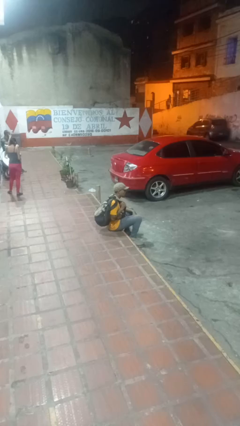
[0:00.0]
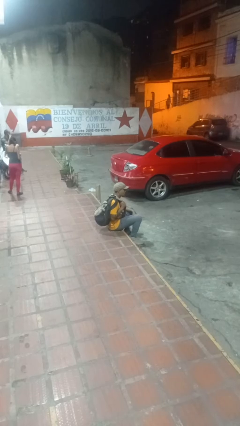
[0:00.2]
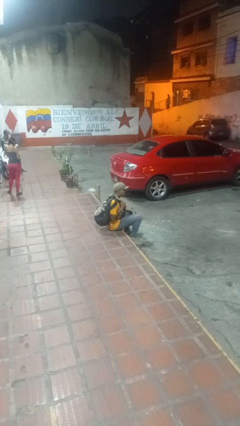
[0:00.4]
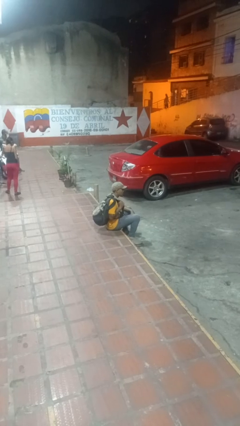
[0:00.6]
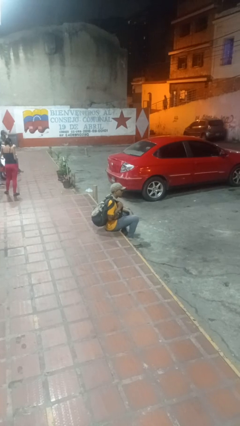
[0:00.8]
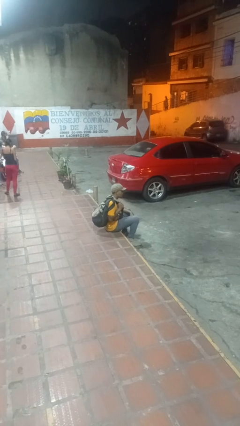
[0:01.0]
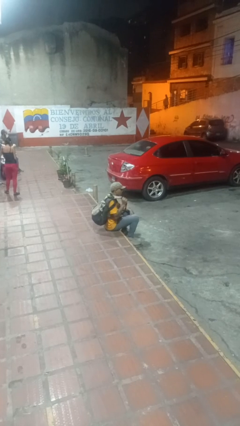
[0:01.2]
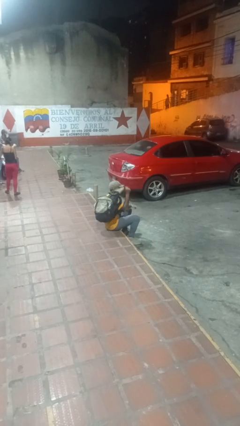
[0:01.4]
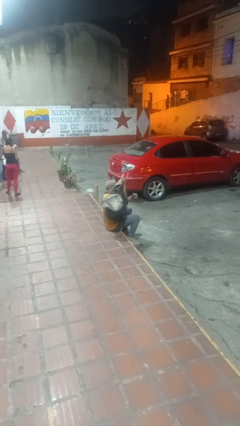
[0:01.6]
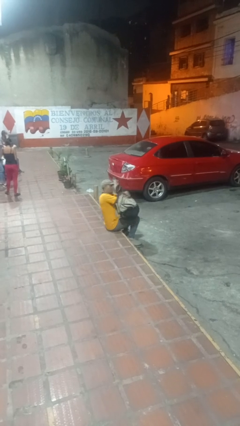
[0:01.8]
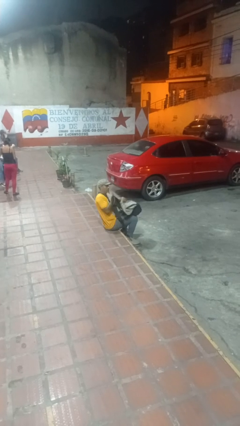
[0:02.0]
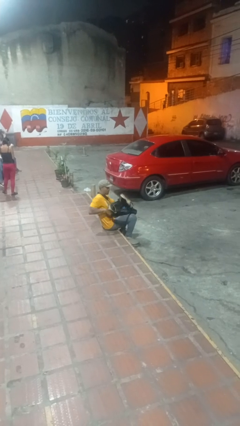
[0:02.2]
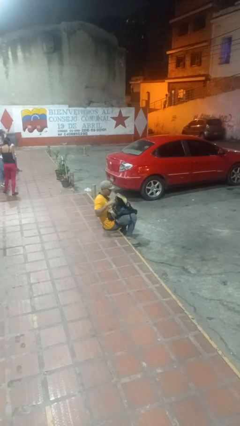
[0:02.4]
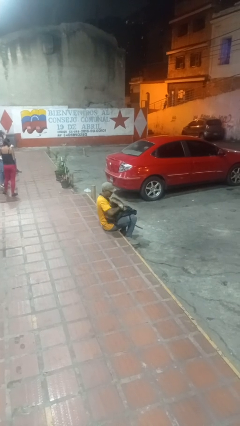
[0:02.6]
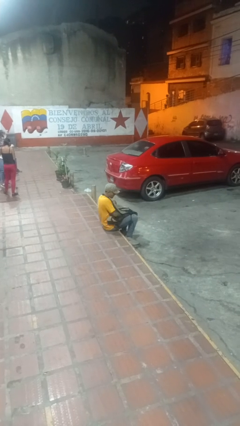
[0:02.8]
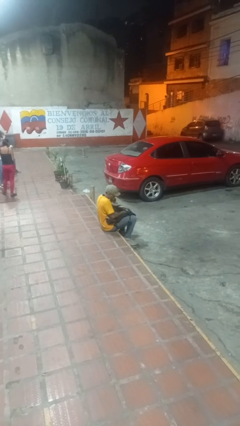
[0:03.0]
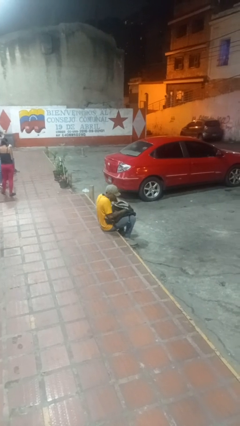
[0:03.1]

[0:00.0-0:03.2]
person searches in backpack

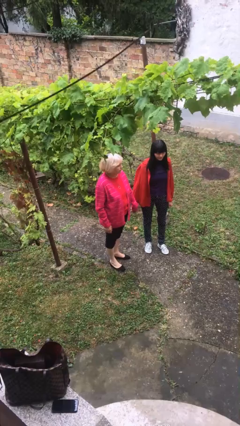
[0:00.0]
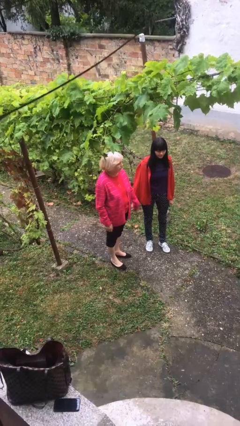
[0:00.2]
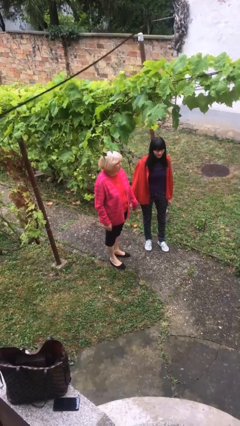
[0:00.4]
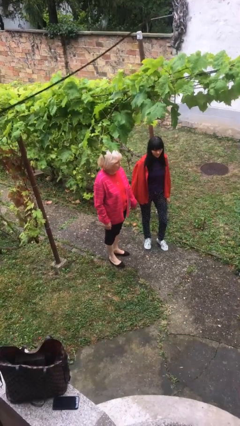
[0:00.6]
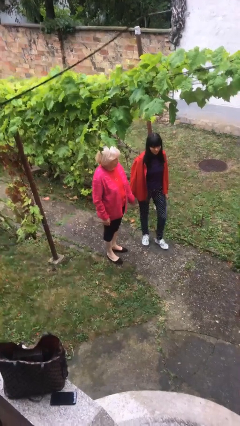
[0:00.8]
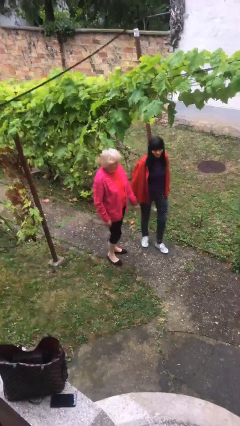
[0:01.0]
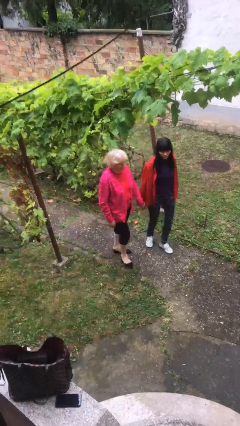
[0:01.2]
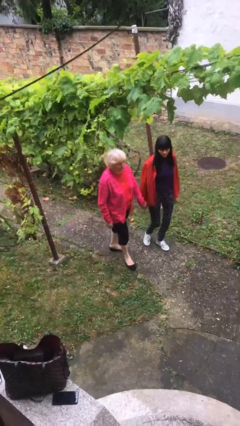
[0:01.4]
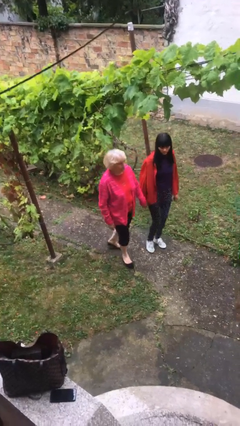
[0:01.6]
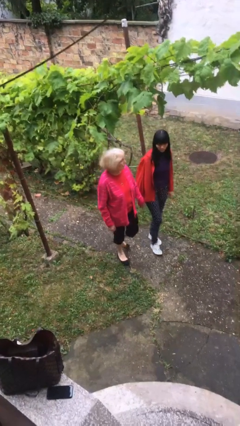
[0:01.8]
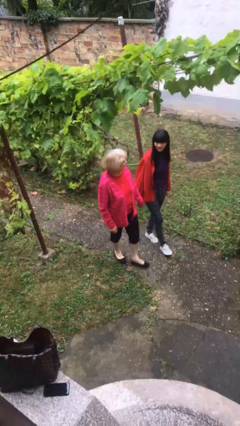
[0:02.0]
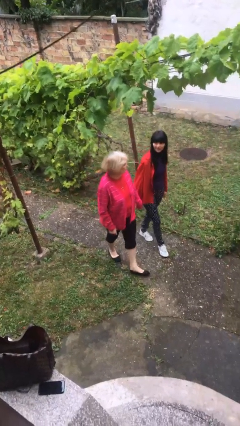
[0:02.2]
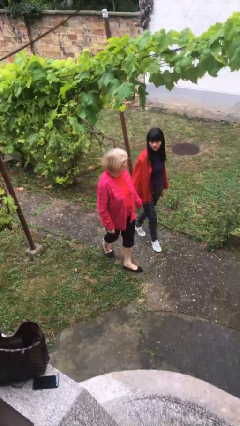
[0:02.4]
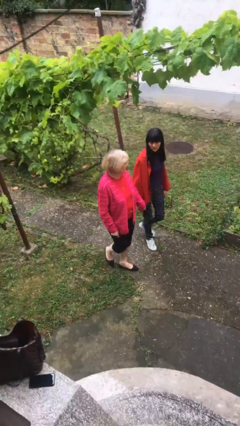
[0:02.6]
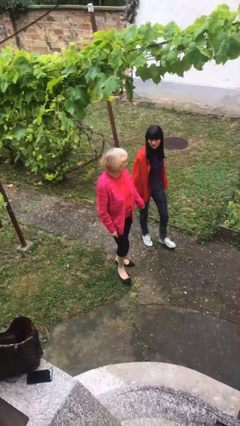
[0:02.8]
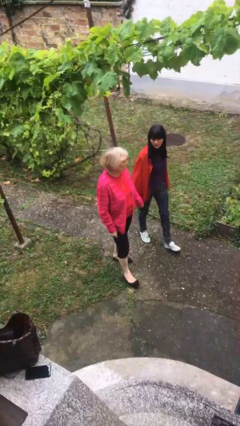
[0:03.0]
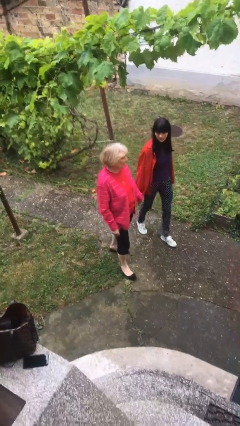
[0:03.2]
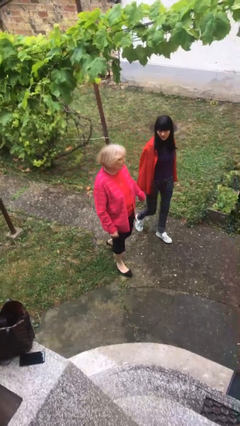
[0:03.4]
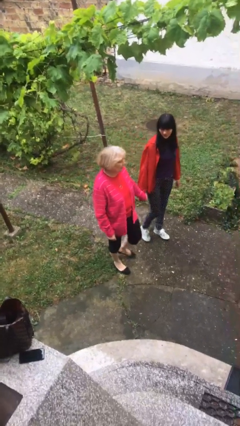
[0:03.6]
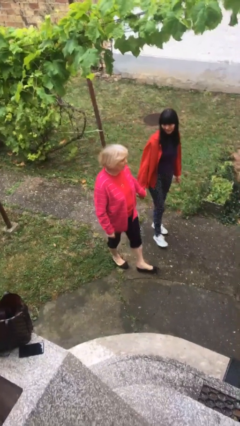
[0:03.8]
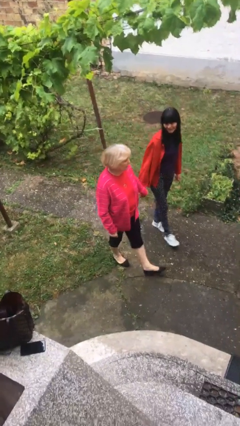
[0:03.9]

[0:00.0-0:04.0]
person holds hand

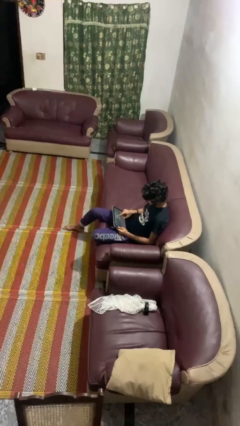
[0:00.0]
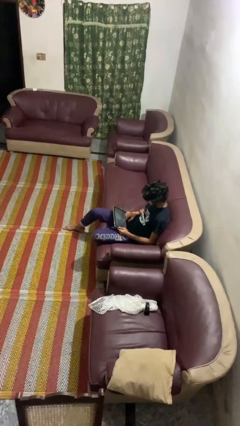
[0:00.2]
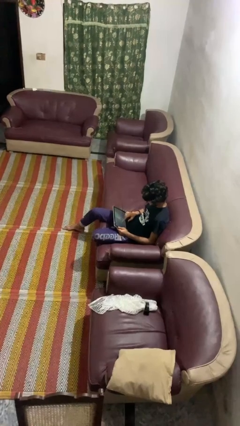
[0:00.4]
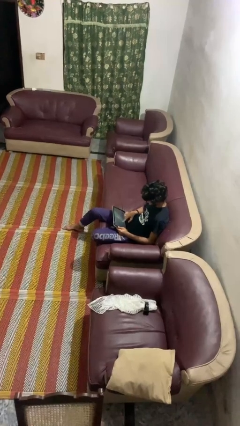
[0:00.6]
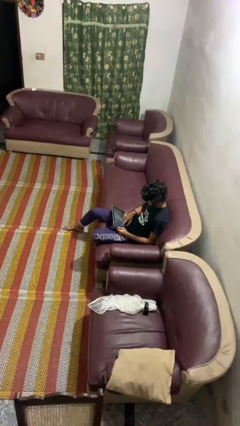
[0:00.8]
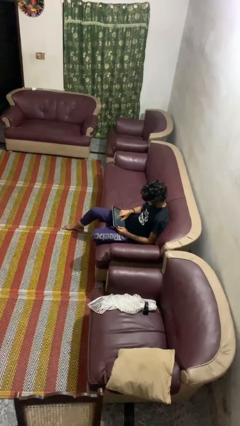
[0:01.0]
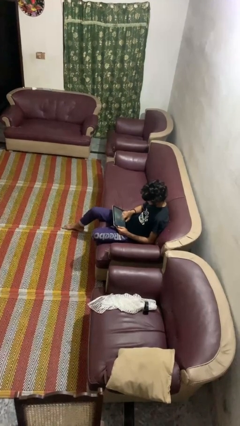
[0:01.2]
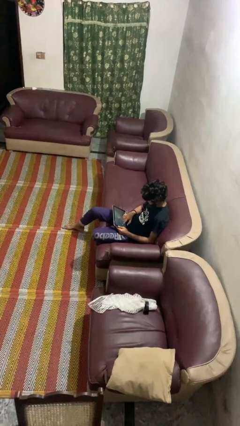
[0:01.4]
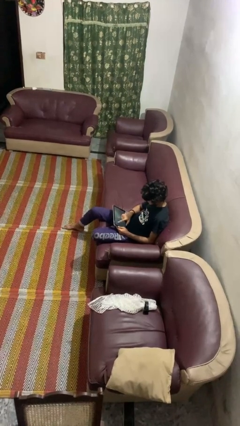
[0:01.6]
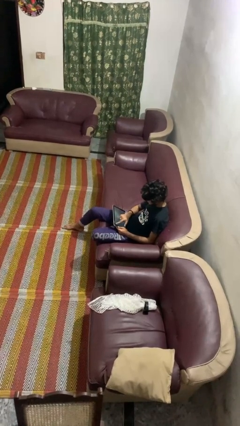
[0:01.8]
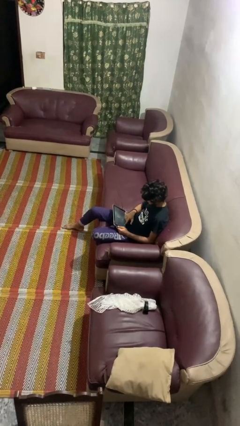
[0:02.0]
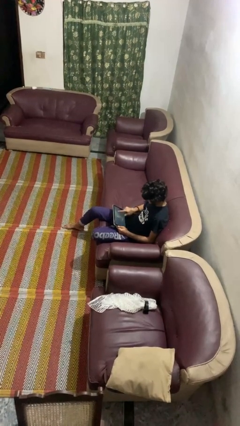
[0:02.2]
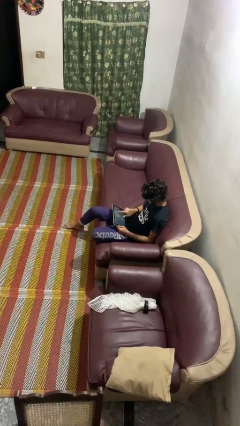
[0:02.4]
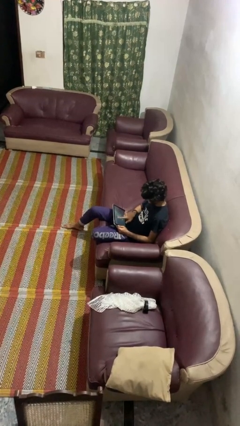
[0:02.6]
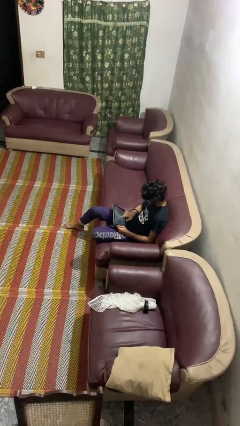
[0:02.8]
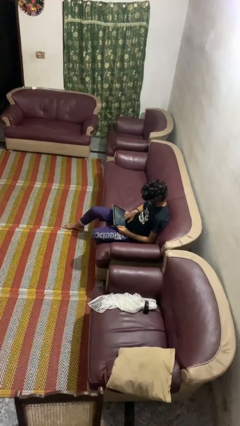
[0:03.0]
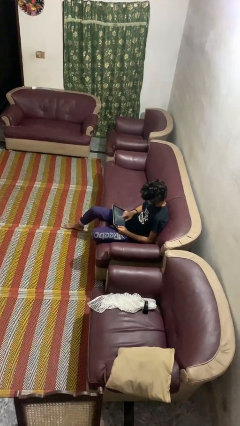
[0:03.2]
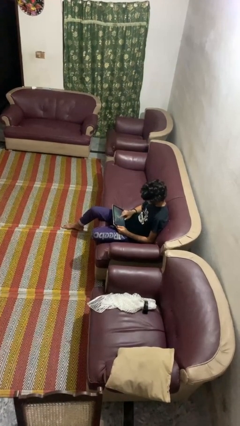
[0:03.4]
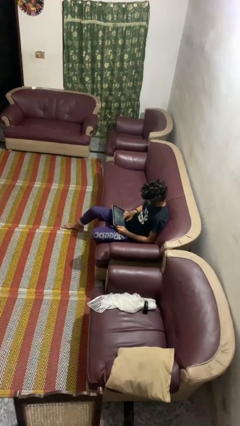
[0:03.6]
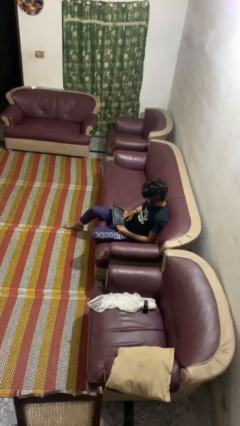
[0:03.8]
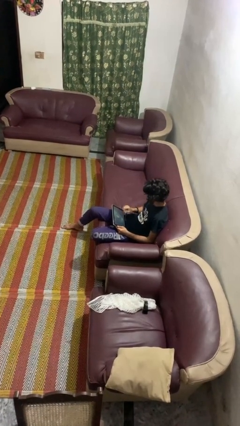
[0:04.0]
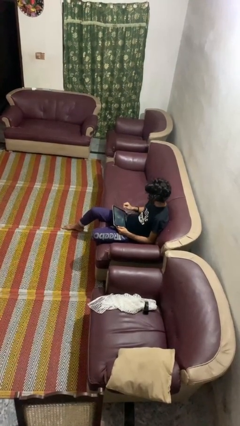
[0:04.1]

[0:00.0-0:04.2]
person interacts with tablet

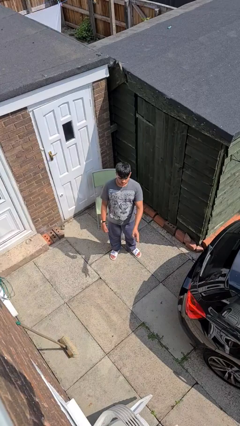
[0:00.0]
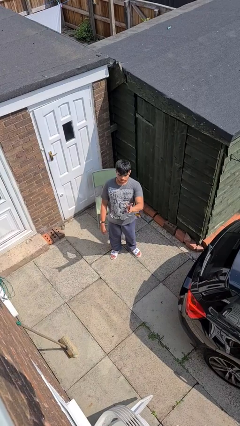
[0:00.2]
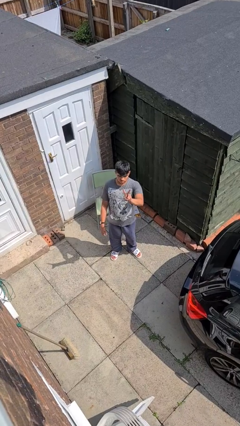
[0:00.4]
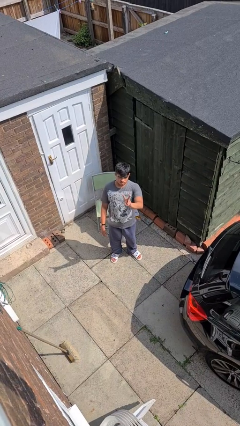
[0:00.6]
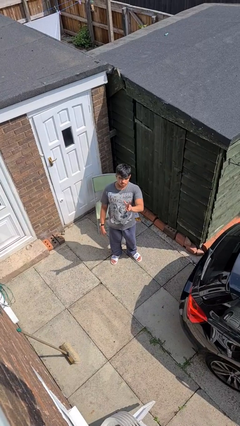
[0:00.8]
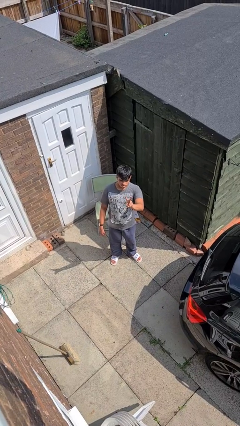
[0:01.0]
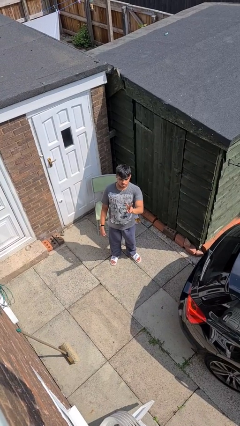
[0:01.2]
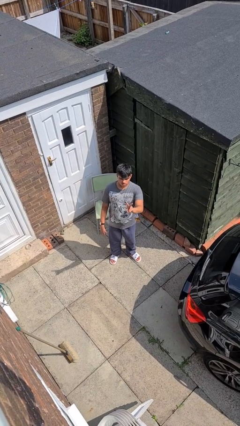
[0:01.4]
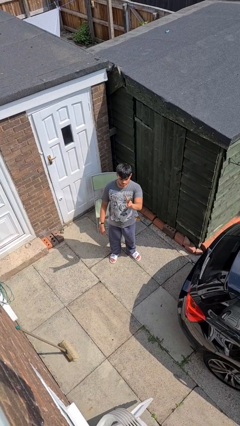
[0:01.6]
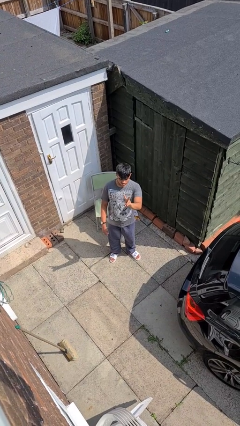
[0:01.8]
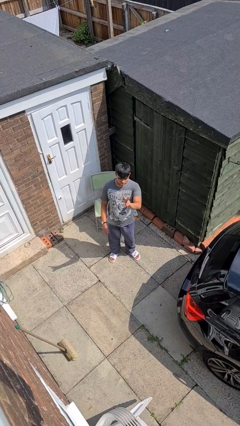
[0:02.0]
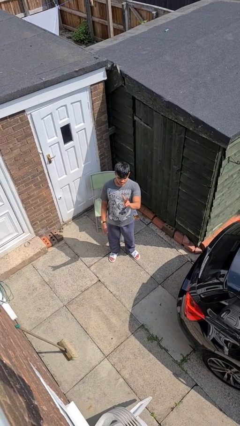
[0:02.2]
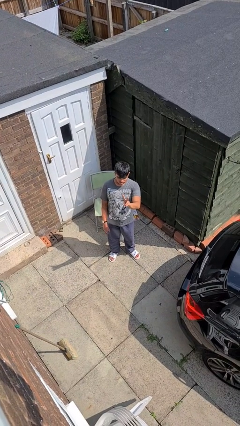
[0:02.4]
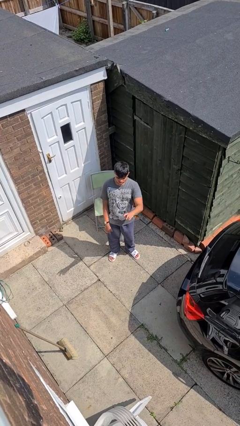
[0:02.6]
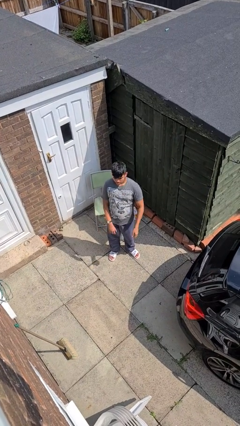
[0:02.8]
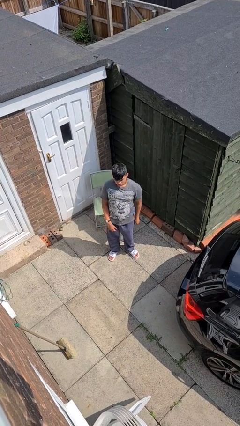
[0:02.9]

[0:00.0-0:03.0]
person gestures peace

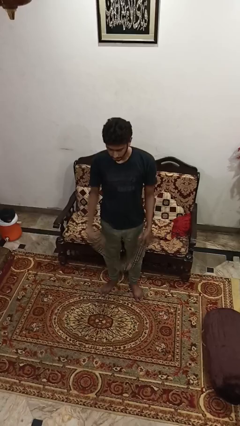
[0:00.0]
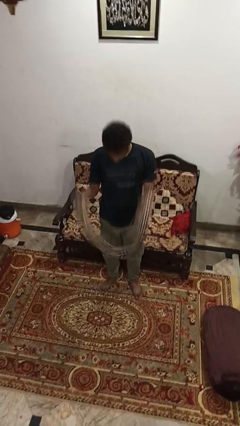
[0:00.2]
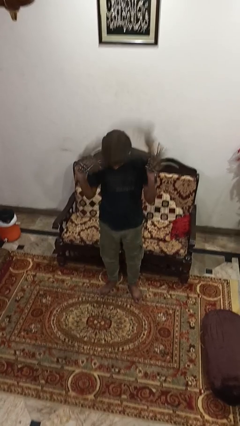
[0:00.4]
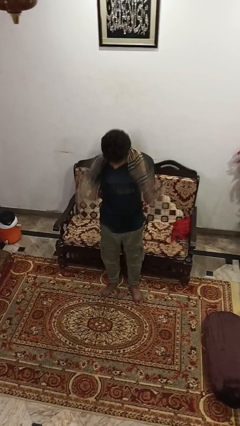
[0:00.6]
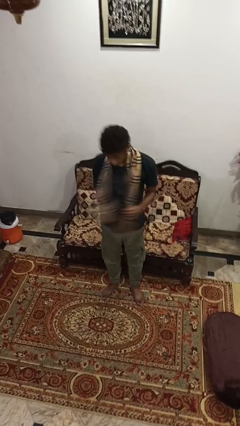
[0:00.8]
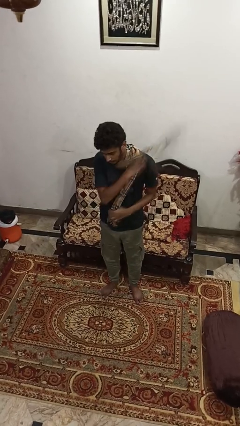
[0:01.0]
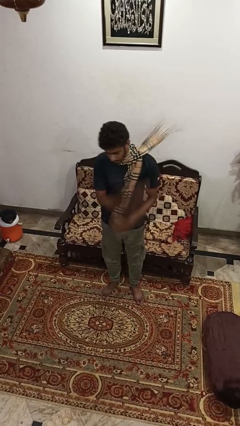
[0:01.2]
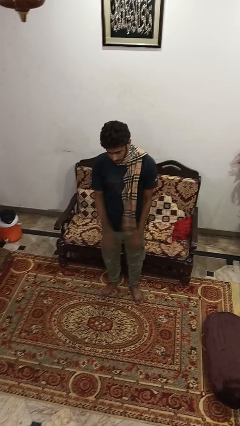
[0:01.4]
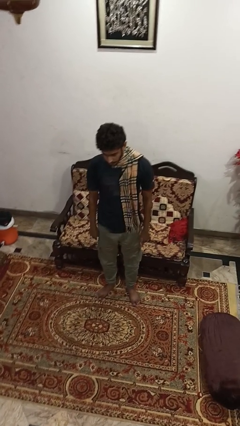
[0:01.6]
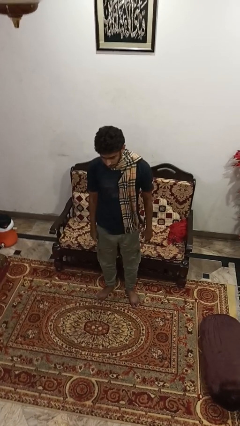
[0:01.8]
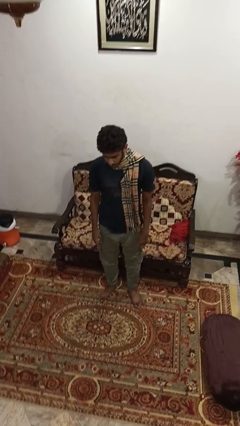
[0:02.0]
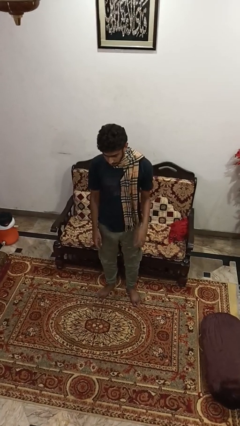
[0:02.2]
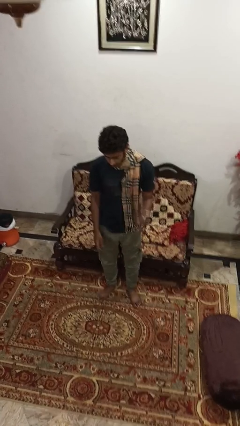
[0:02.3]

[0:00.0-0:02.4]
person puts on scarf

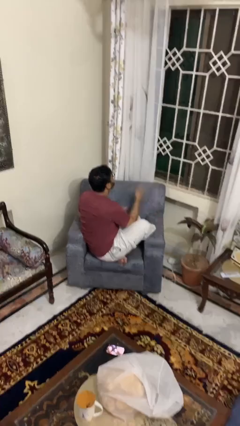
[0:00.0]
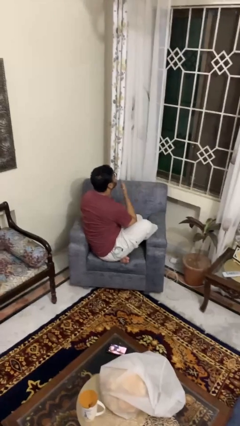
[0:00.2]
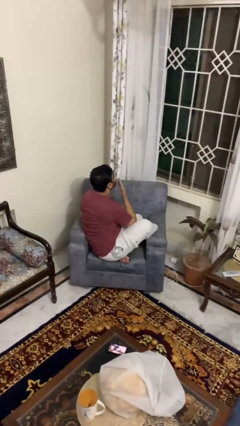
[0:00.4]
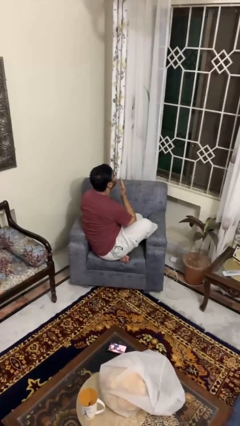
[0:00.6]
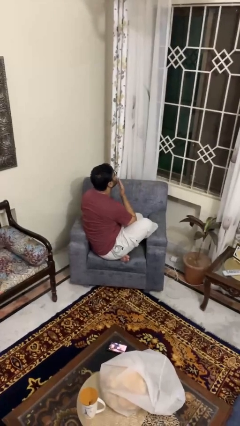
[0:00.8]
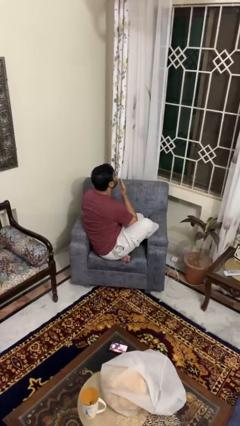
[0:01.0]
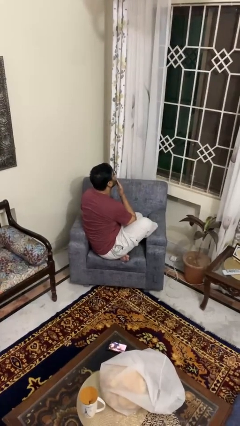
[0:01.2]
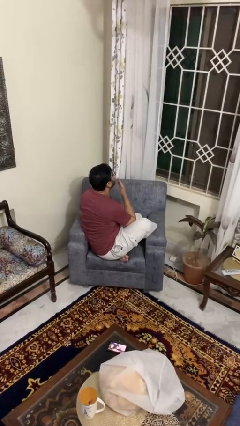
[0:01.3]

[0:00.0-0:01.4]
person strokes chin
